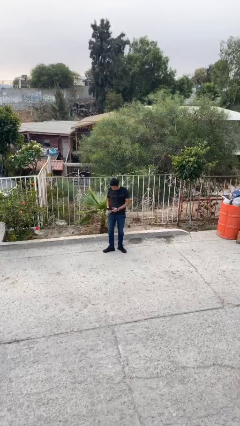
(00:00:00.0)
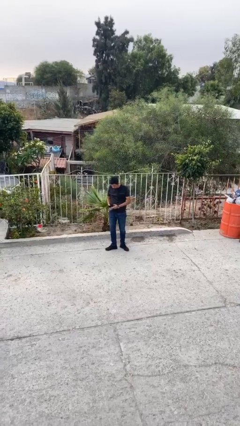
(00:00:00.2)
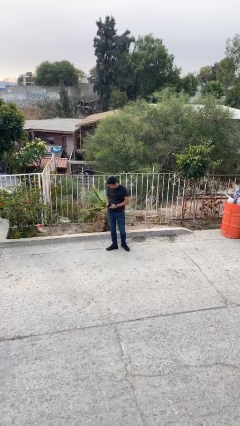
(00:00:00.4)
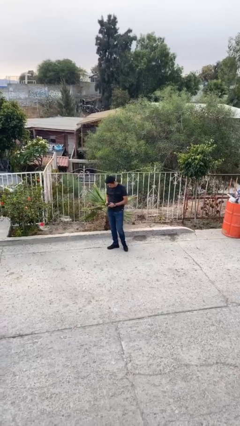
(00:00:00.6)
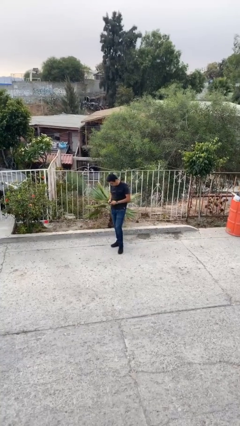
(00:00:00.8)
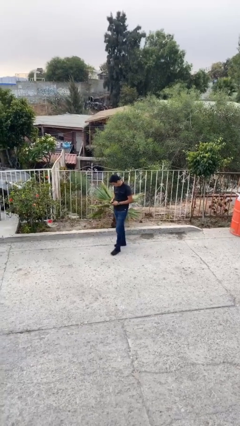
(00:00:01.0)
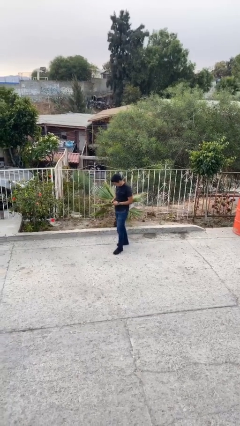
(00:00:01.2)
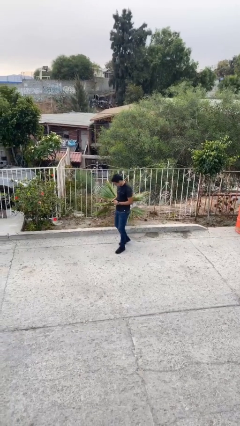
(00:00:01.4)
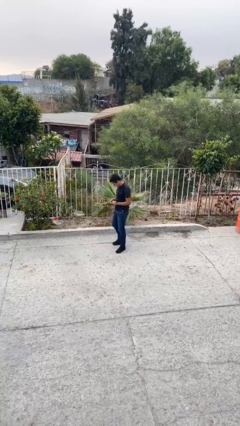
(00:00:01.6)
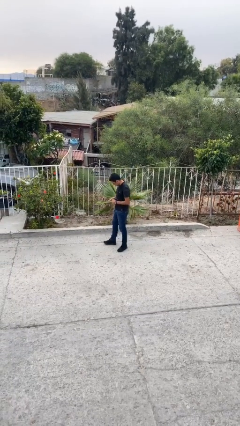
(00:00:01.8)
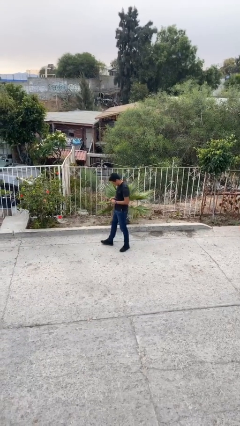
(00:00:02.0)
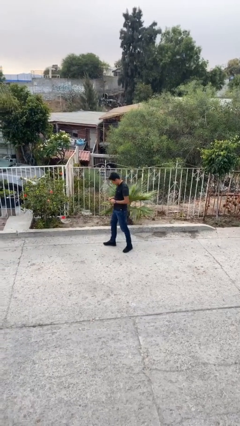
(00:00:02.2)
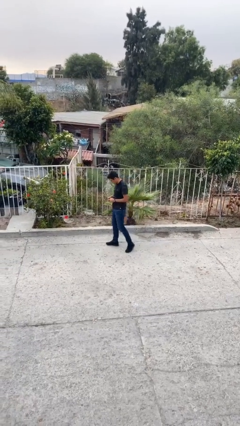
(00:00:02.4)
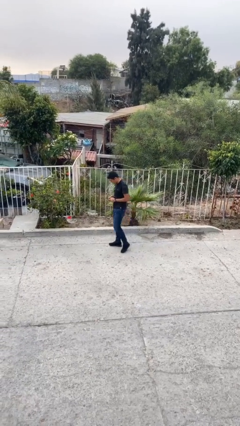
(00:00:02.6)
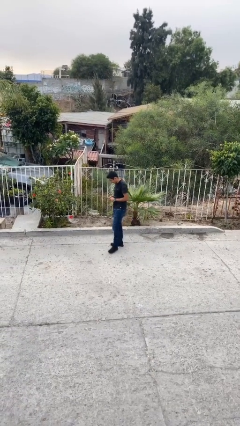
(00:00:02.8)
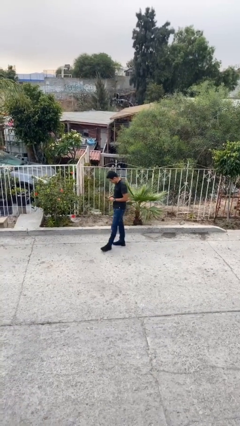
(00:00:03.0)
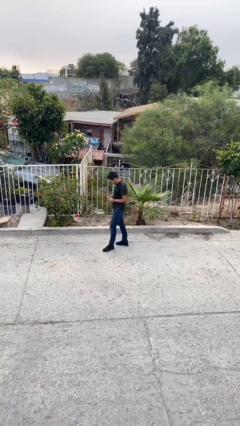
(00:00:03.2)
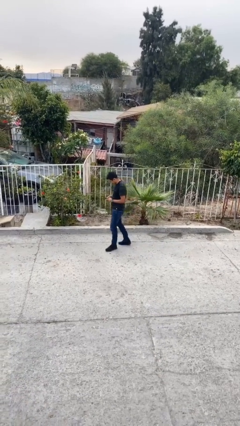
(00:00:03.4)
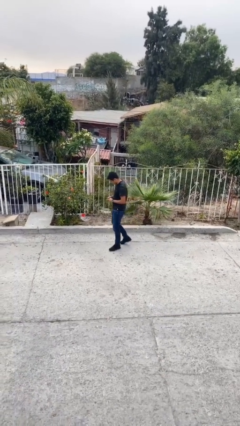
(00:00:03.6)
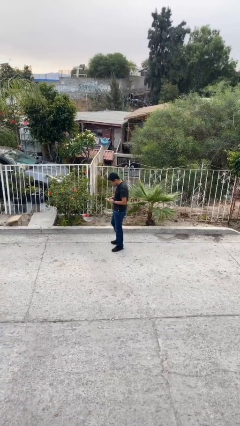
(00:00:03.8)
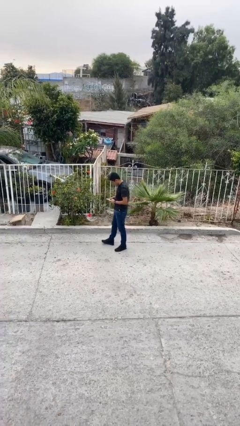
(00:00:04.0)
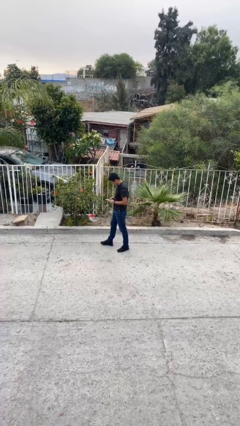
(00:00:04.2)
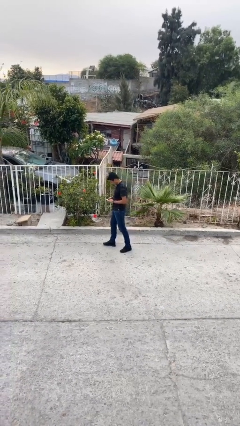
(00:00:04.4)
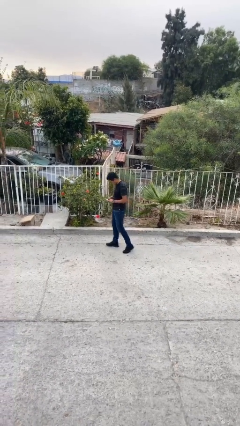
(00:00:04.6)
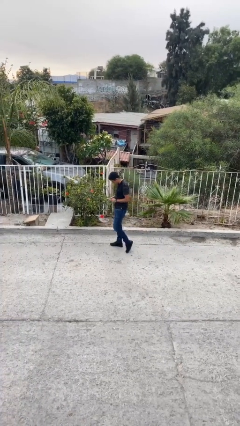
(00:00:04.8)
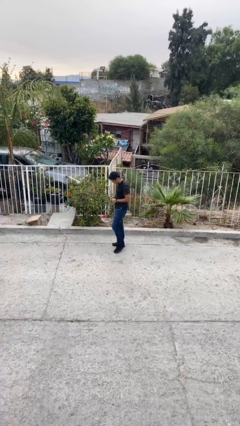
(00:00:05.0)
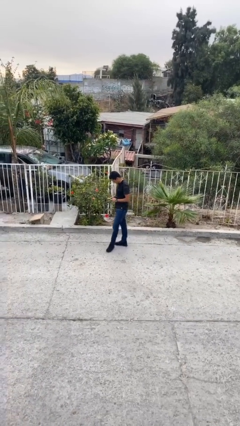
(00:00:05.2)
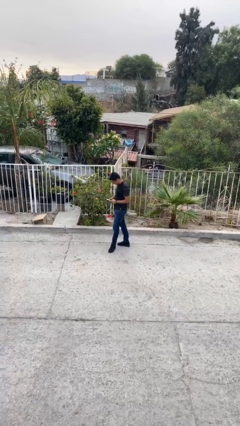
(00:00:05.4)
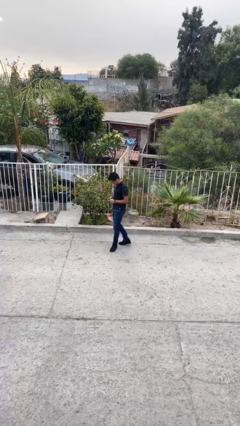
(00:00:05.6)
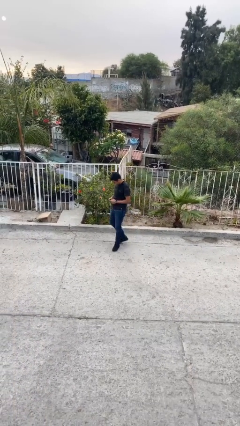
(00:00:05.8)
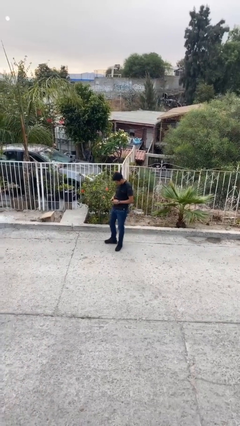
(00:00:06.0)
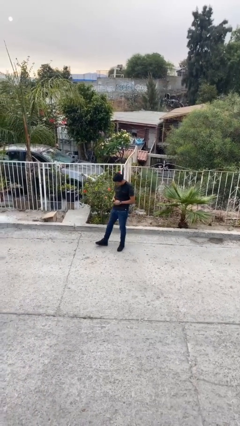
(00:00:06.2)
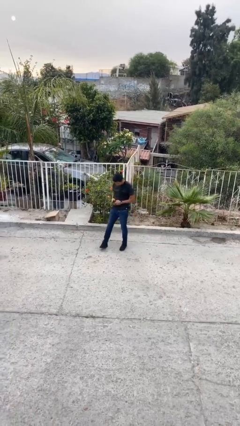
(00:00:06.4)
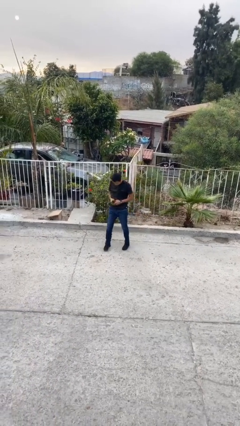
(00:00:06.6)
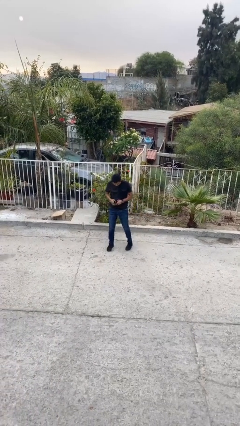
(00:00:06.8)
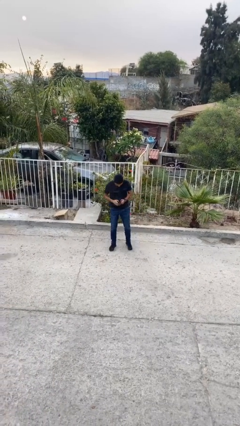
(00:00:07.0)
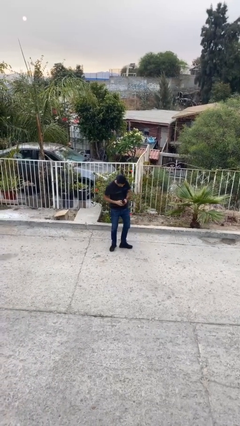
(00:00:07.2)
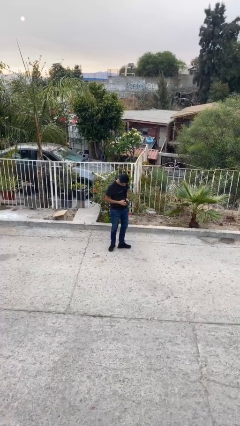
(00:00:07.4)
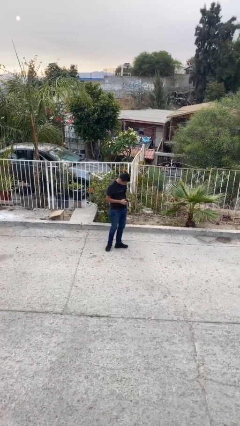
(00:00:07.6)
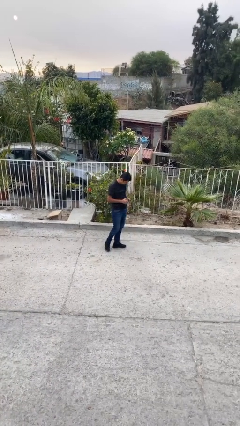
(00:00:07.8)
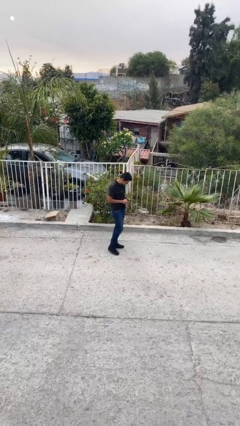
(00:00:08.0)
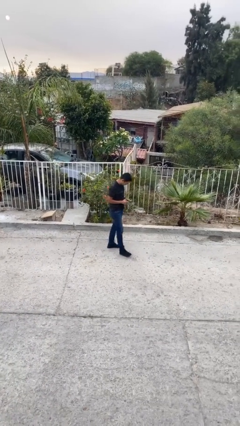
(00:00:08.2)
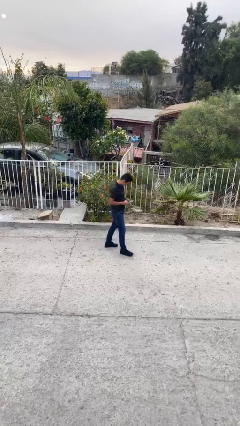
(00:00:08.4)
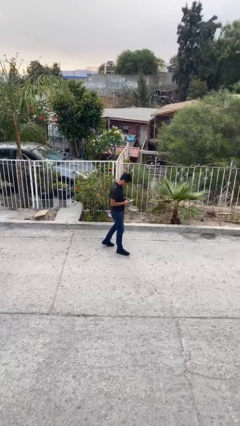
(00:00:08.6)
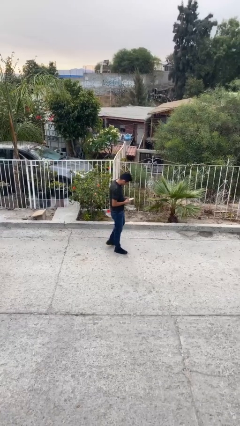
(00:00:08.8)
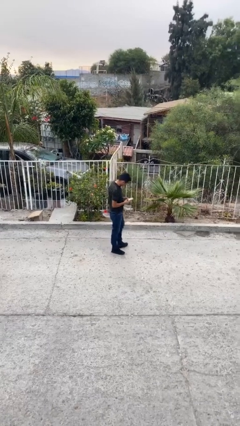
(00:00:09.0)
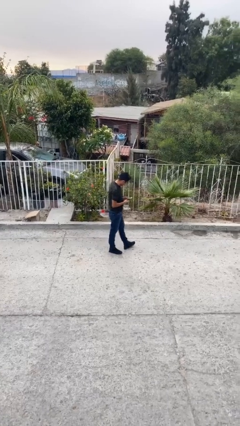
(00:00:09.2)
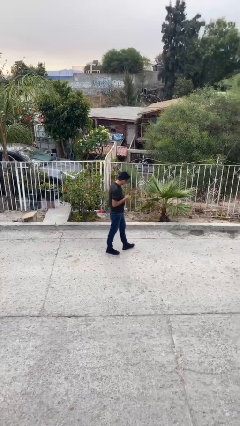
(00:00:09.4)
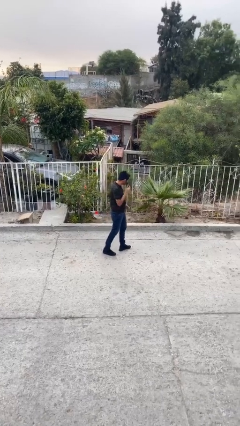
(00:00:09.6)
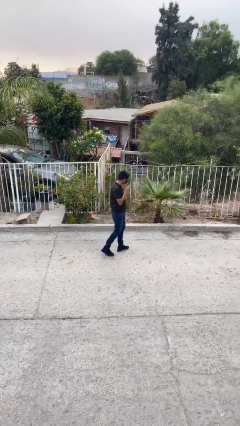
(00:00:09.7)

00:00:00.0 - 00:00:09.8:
person texts on phone

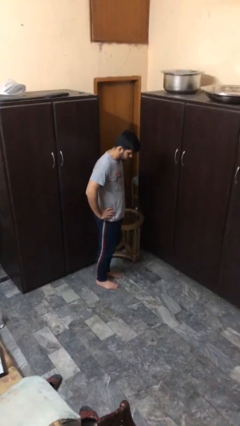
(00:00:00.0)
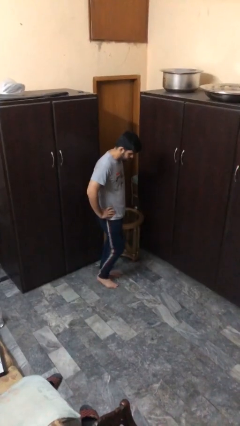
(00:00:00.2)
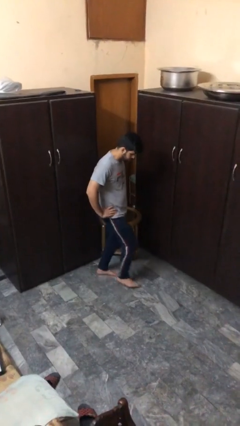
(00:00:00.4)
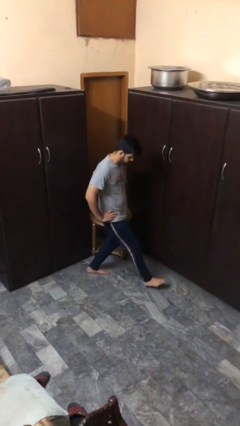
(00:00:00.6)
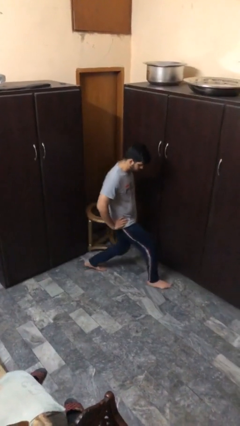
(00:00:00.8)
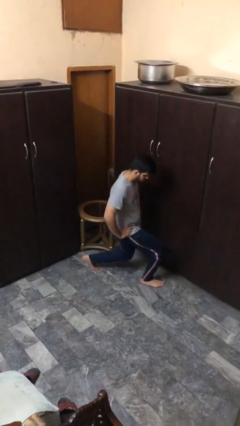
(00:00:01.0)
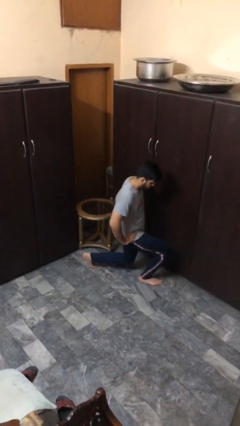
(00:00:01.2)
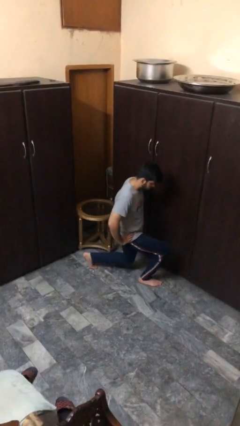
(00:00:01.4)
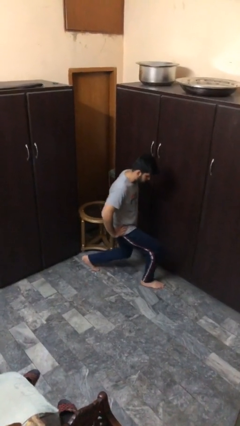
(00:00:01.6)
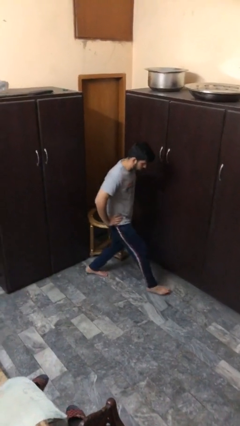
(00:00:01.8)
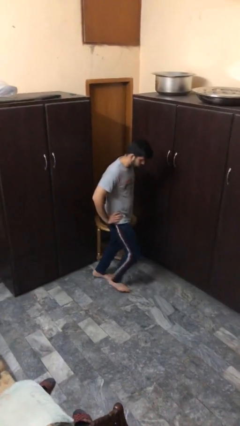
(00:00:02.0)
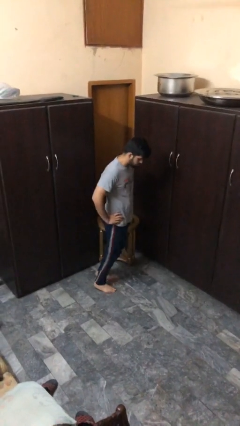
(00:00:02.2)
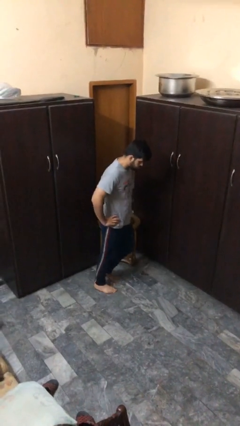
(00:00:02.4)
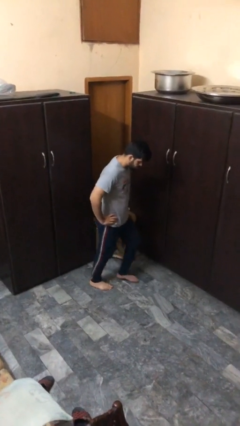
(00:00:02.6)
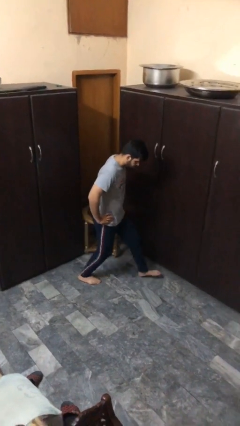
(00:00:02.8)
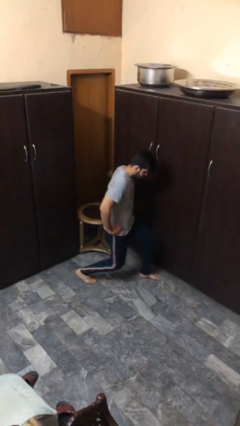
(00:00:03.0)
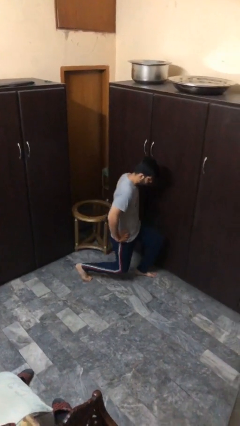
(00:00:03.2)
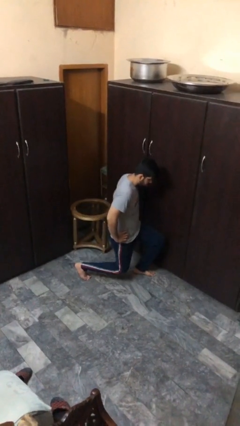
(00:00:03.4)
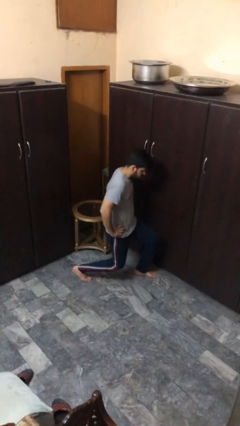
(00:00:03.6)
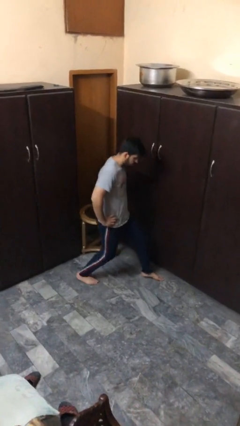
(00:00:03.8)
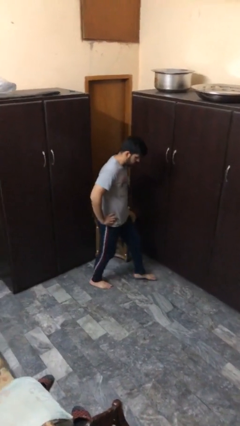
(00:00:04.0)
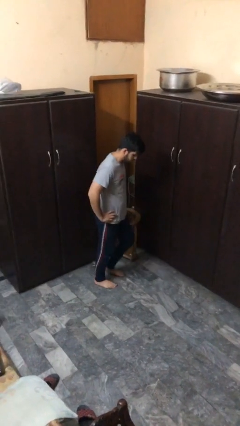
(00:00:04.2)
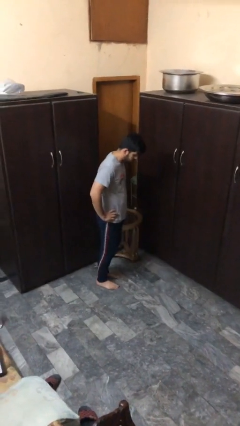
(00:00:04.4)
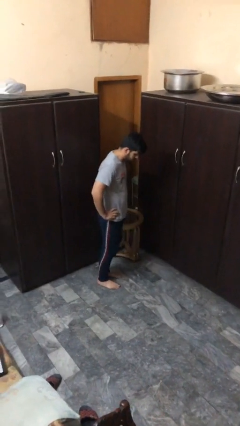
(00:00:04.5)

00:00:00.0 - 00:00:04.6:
person exercises with lunges

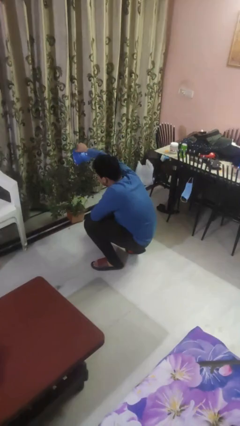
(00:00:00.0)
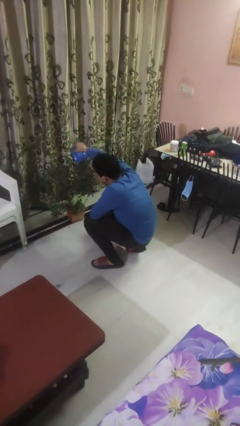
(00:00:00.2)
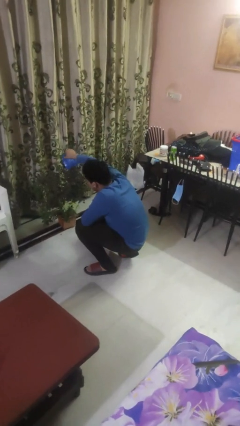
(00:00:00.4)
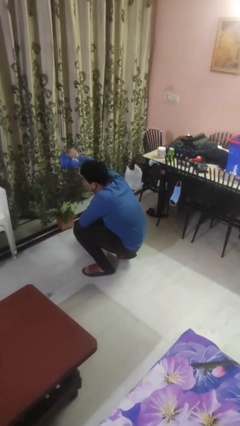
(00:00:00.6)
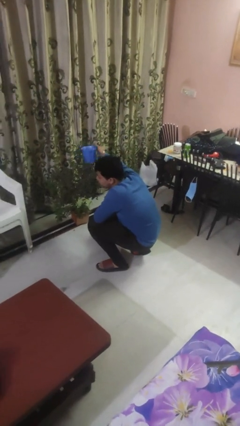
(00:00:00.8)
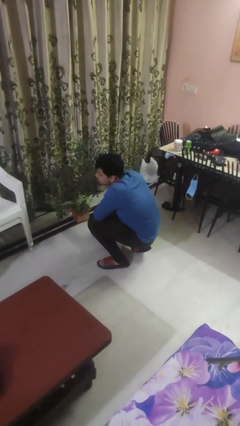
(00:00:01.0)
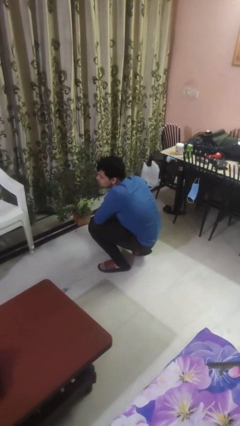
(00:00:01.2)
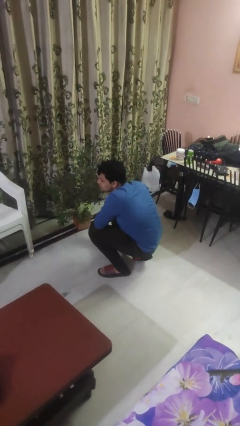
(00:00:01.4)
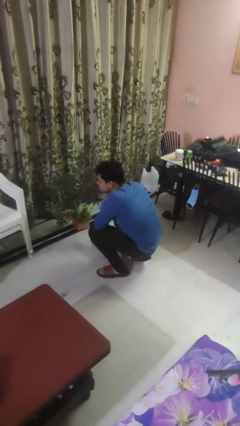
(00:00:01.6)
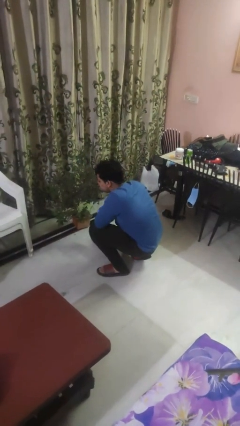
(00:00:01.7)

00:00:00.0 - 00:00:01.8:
person waters houseplant

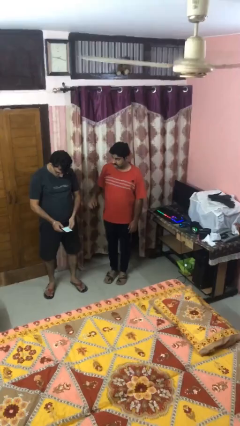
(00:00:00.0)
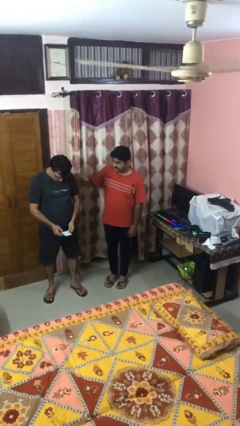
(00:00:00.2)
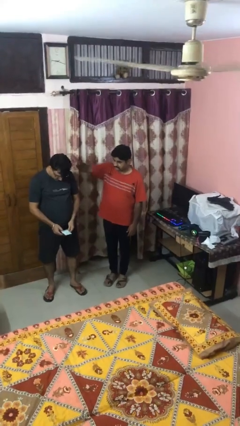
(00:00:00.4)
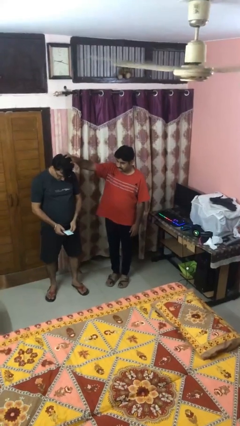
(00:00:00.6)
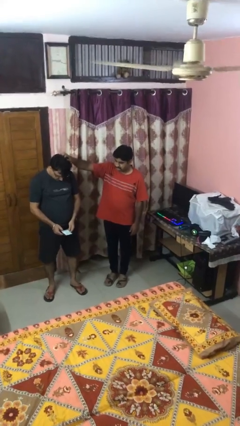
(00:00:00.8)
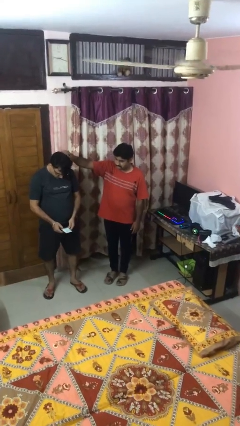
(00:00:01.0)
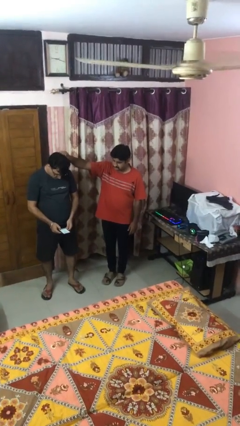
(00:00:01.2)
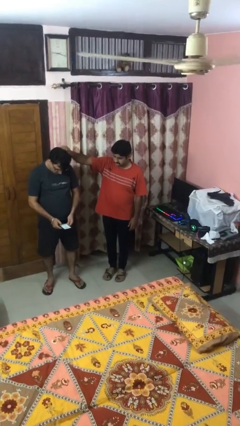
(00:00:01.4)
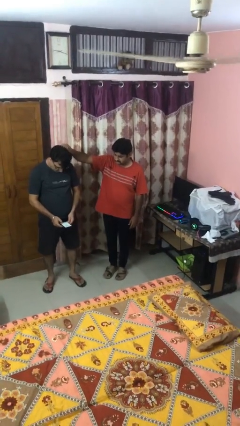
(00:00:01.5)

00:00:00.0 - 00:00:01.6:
person grabs person by hair
